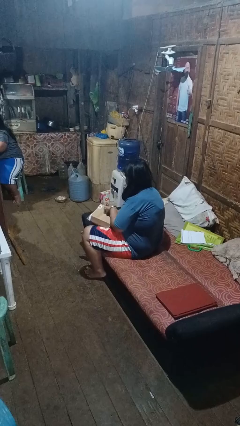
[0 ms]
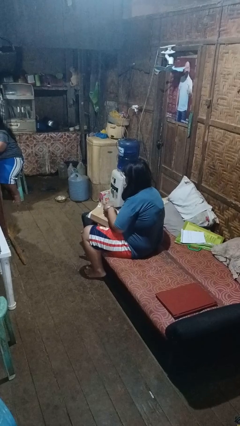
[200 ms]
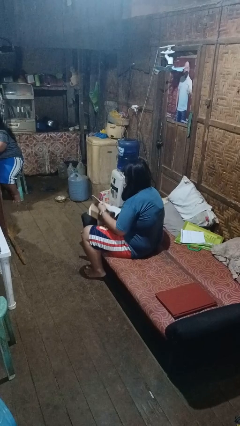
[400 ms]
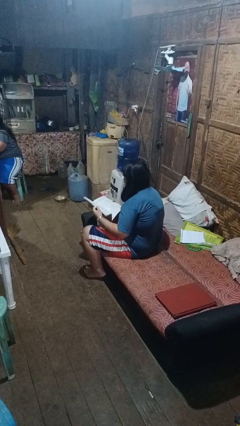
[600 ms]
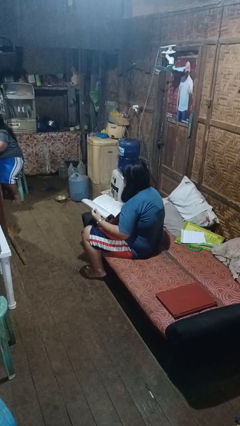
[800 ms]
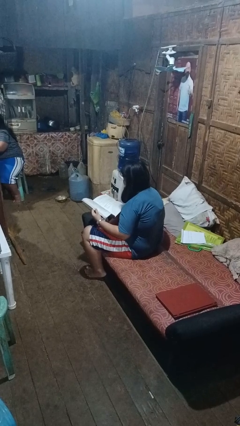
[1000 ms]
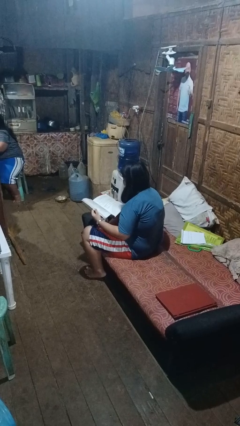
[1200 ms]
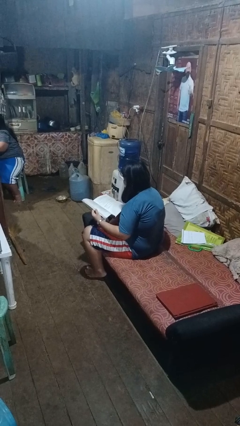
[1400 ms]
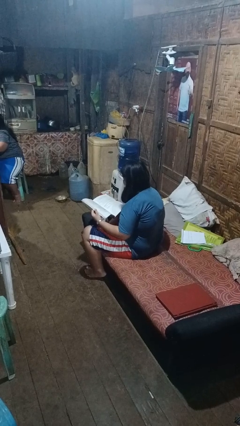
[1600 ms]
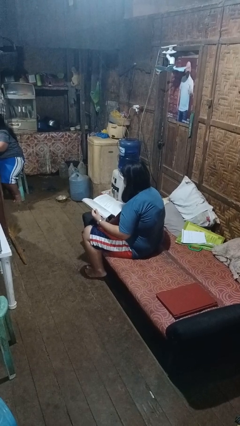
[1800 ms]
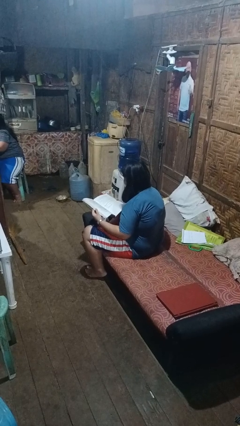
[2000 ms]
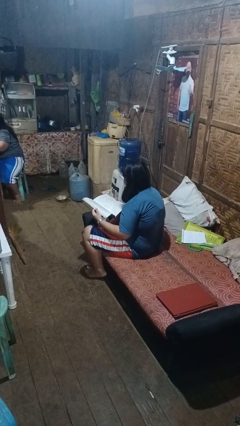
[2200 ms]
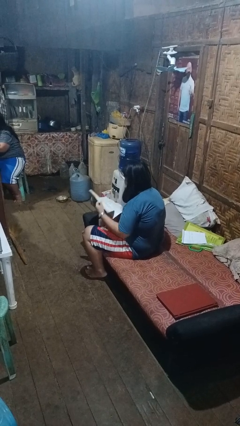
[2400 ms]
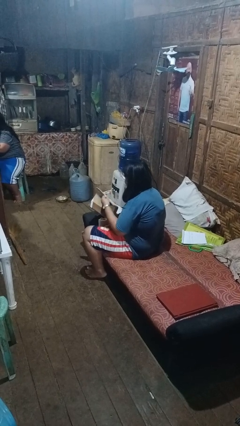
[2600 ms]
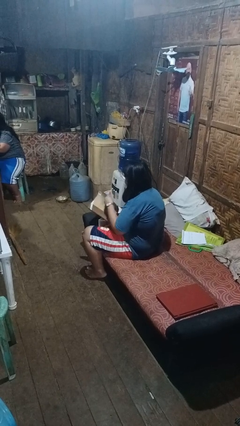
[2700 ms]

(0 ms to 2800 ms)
person reads book

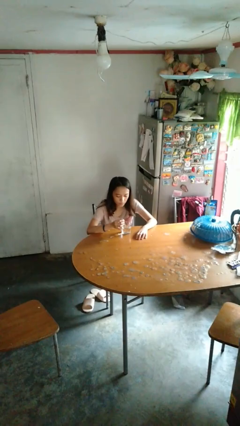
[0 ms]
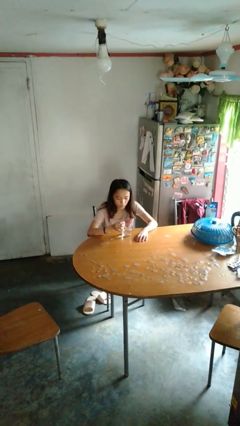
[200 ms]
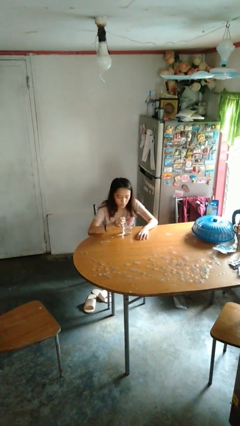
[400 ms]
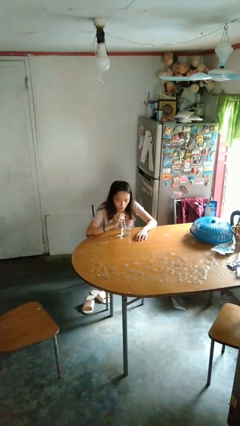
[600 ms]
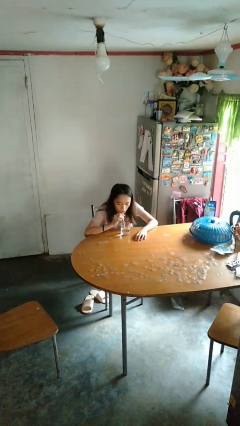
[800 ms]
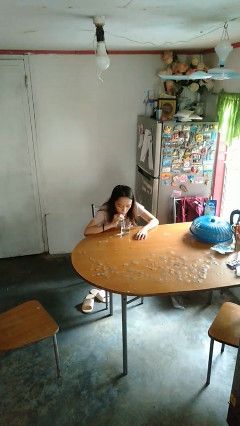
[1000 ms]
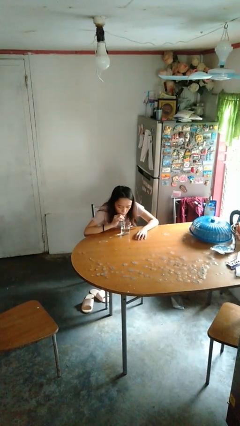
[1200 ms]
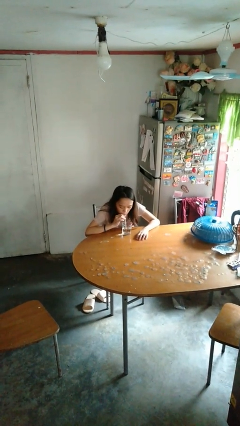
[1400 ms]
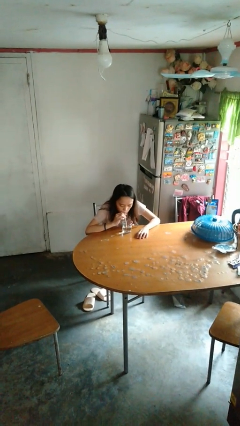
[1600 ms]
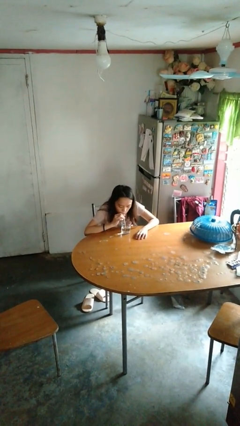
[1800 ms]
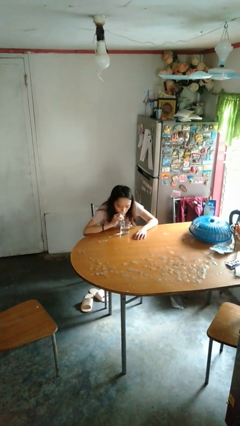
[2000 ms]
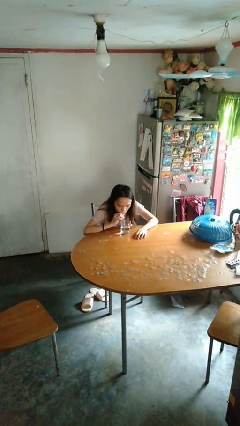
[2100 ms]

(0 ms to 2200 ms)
person drinks from straw

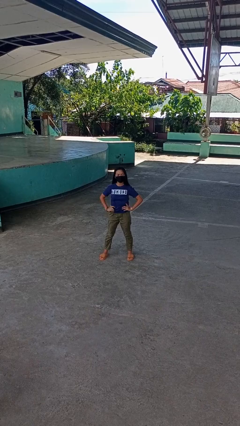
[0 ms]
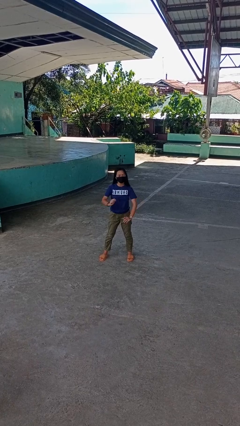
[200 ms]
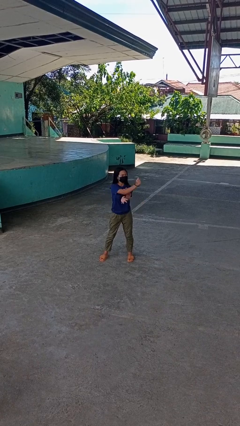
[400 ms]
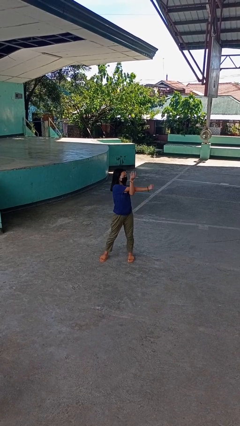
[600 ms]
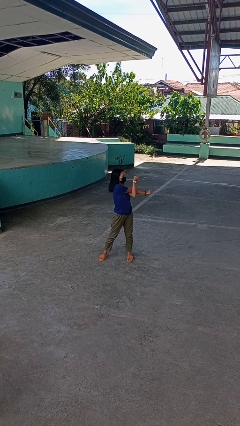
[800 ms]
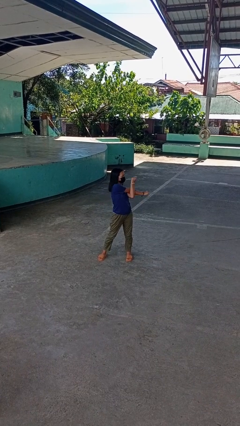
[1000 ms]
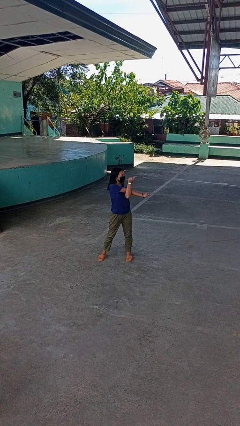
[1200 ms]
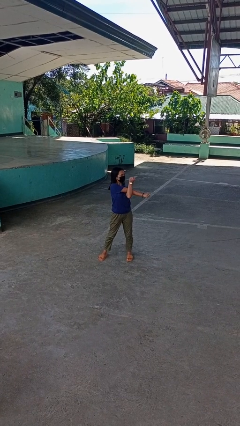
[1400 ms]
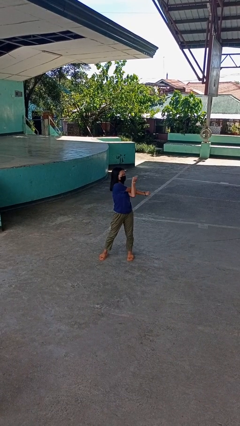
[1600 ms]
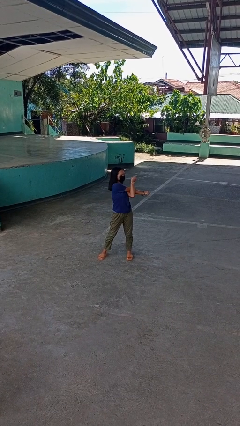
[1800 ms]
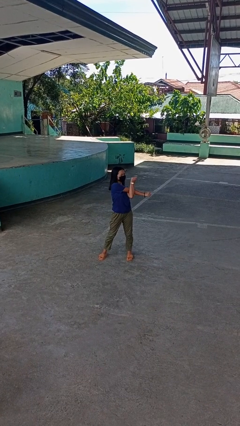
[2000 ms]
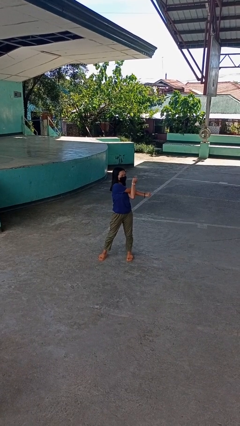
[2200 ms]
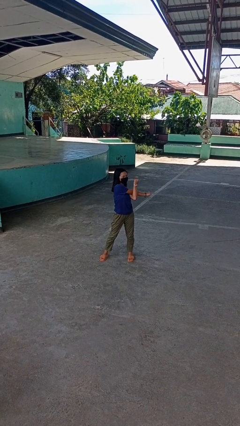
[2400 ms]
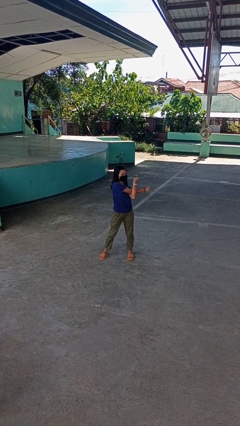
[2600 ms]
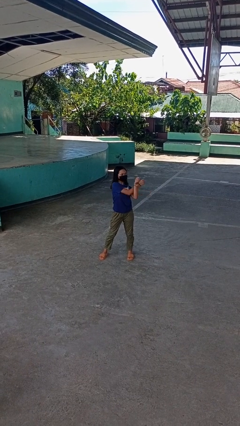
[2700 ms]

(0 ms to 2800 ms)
person stretches arms to side

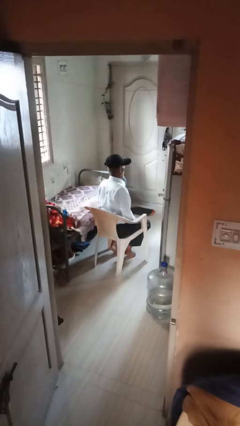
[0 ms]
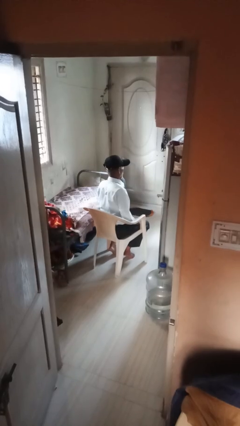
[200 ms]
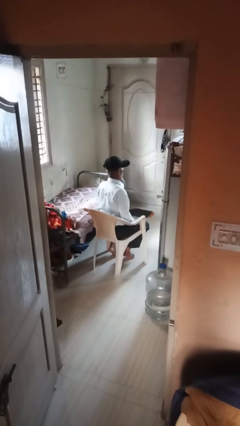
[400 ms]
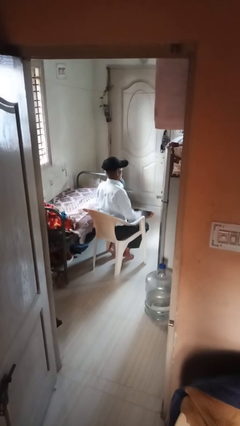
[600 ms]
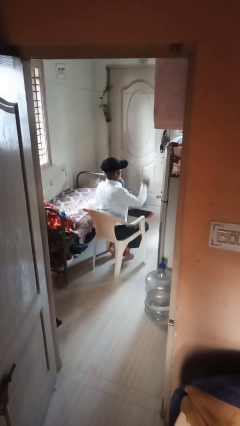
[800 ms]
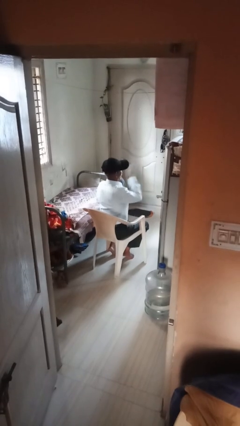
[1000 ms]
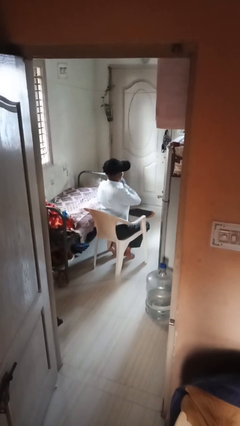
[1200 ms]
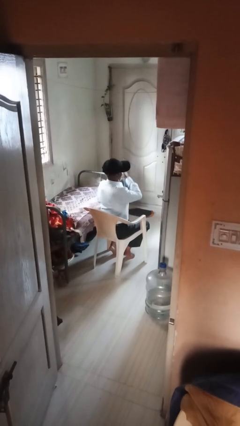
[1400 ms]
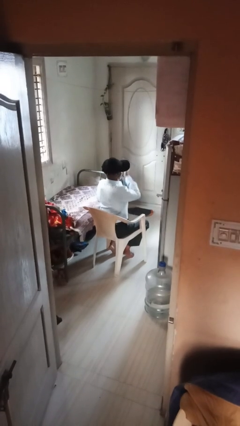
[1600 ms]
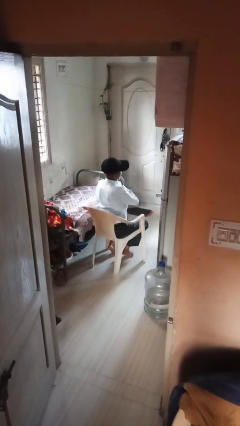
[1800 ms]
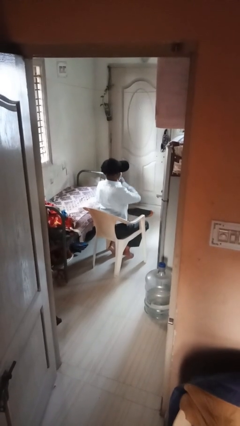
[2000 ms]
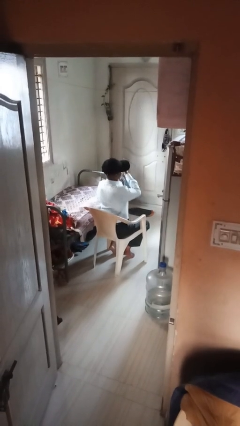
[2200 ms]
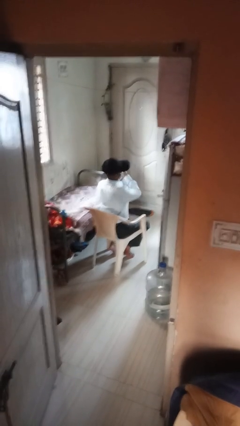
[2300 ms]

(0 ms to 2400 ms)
person drums on chest

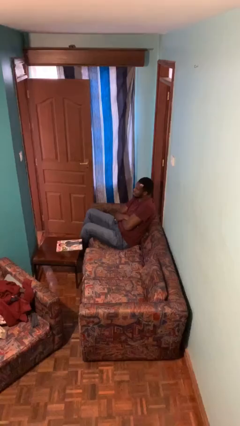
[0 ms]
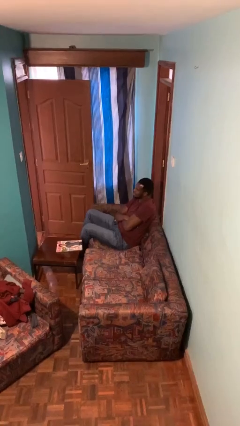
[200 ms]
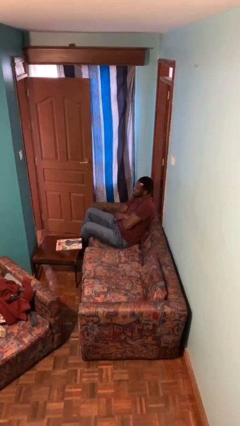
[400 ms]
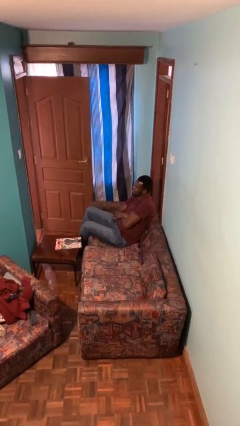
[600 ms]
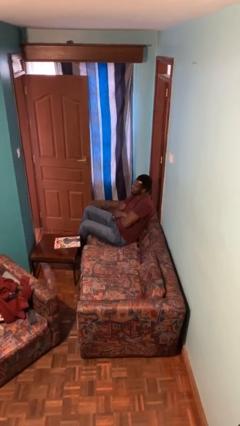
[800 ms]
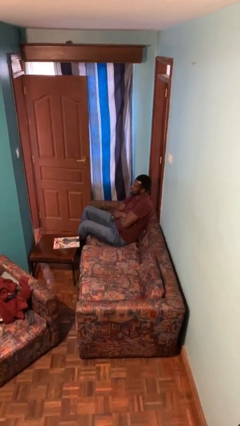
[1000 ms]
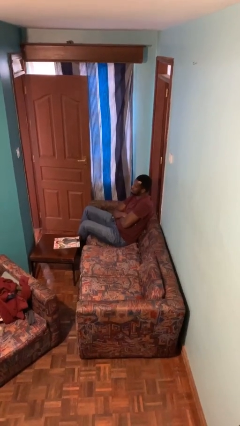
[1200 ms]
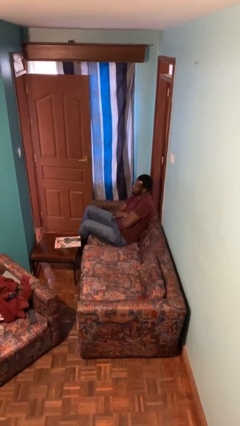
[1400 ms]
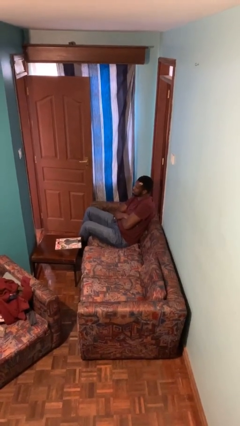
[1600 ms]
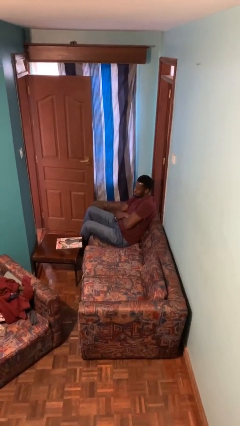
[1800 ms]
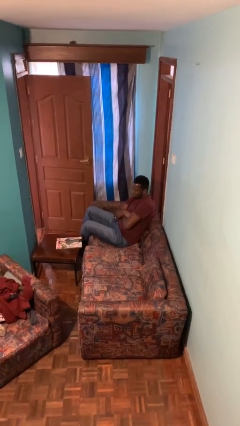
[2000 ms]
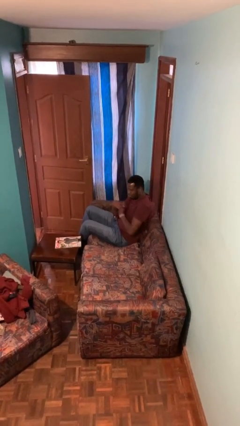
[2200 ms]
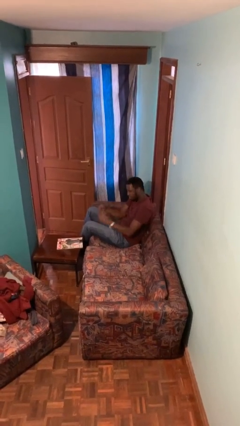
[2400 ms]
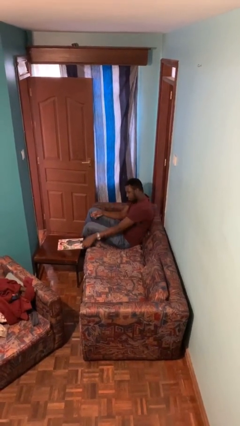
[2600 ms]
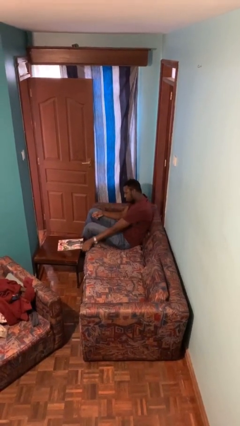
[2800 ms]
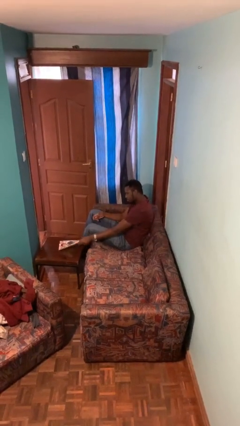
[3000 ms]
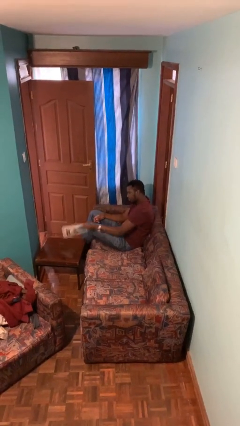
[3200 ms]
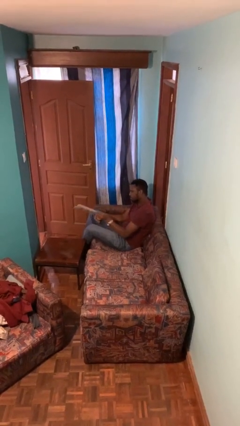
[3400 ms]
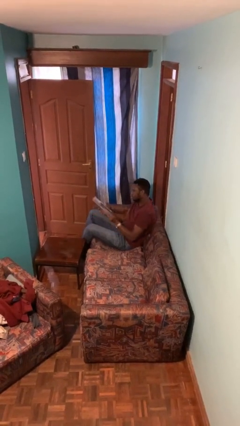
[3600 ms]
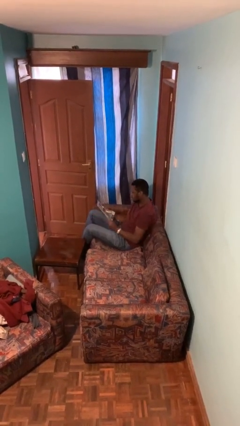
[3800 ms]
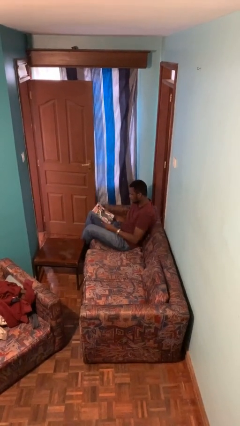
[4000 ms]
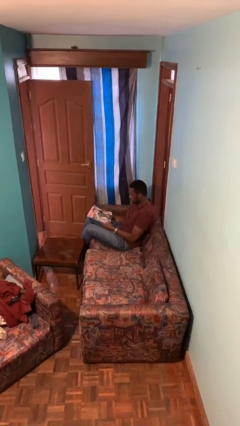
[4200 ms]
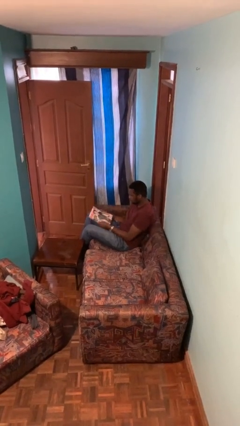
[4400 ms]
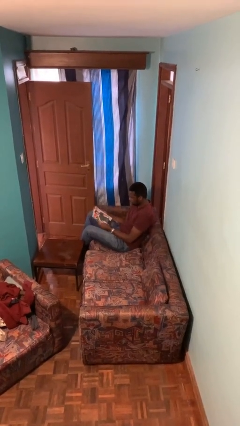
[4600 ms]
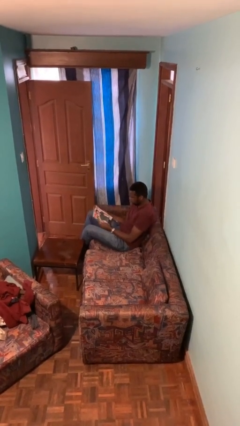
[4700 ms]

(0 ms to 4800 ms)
person picks up object from table

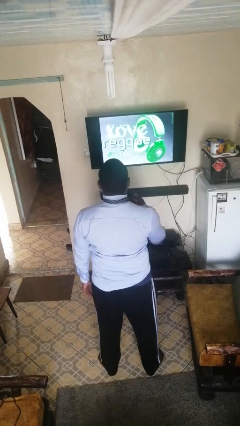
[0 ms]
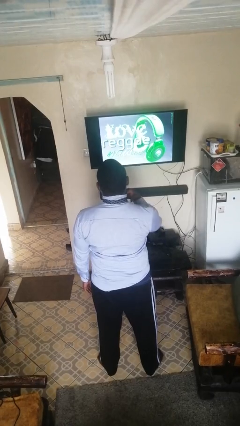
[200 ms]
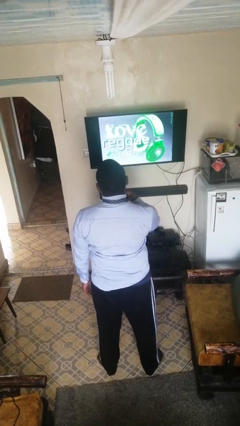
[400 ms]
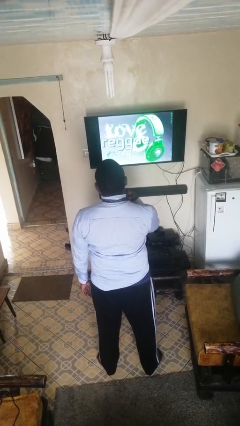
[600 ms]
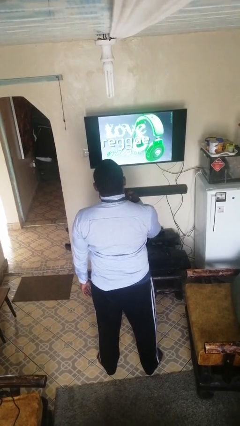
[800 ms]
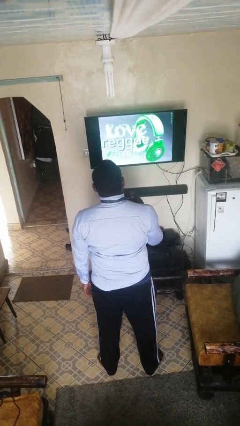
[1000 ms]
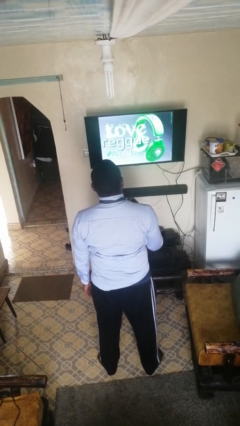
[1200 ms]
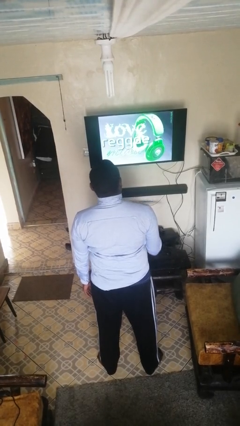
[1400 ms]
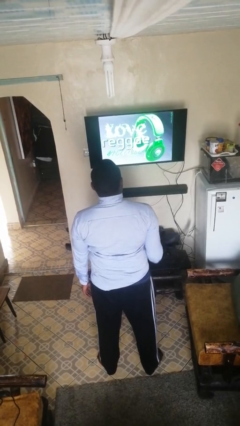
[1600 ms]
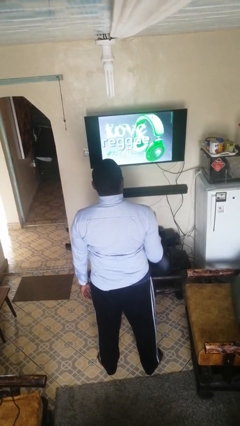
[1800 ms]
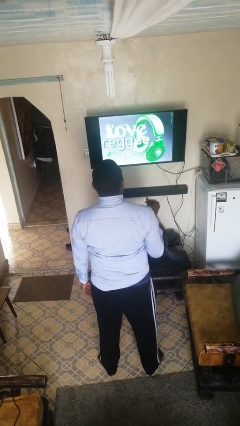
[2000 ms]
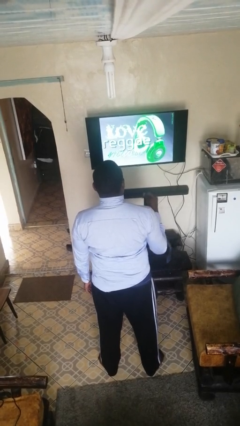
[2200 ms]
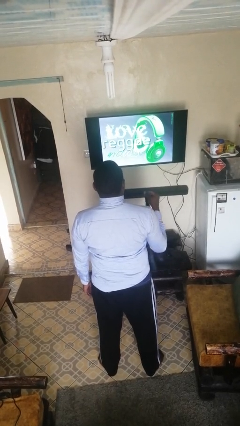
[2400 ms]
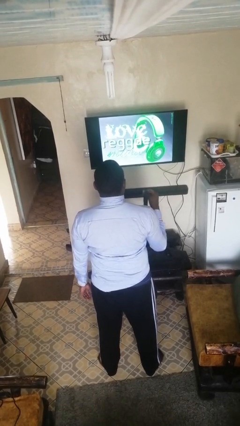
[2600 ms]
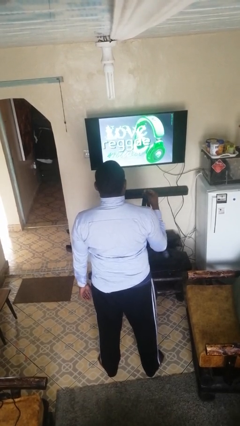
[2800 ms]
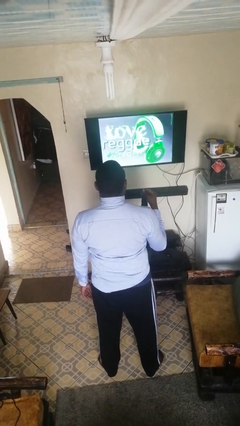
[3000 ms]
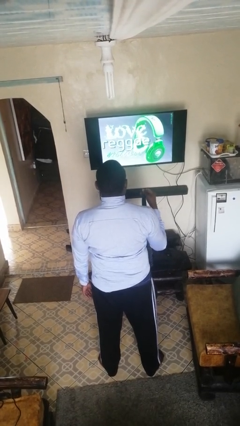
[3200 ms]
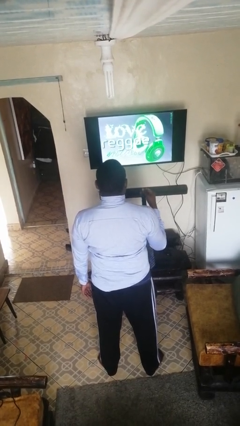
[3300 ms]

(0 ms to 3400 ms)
person takes off necktie
